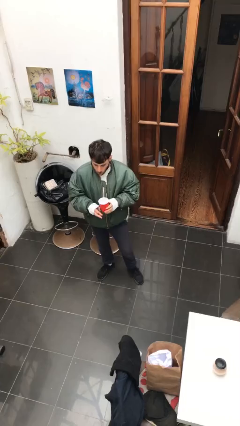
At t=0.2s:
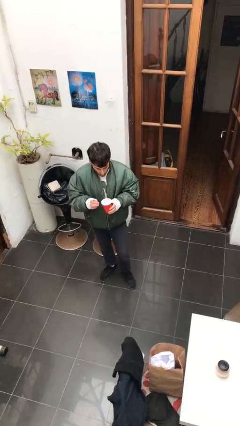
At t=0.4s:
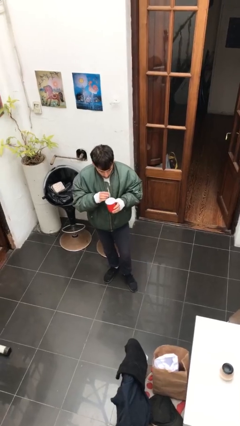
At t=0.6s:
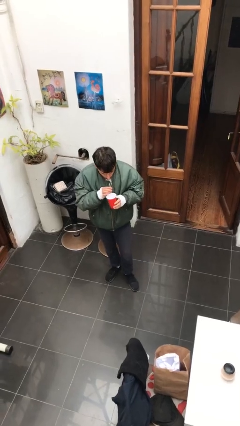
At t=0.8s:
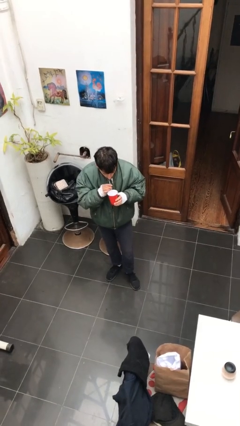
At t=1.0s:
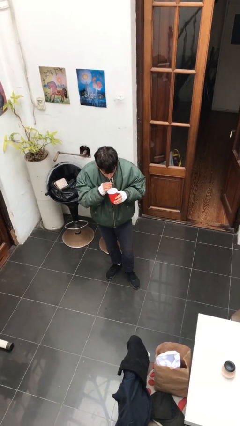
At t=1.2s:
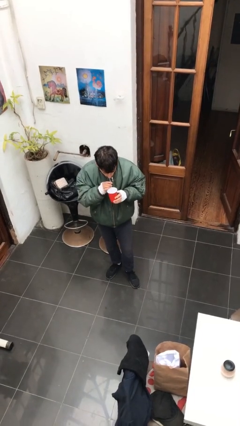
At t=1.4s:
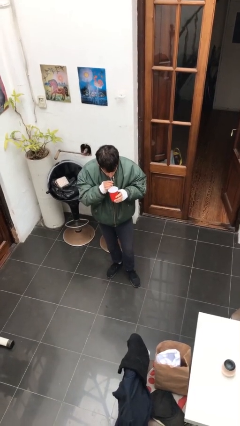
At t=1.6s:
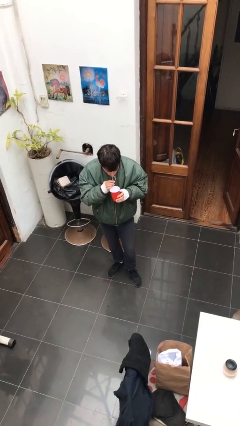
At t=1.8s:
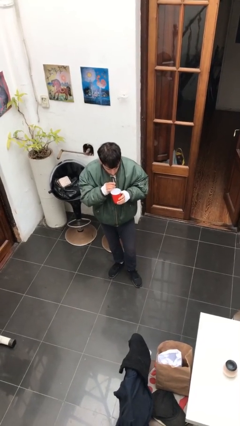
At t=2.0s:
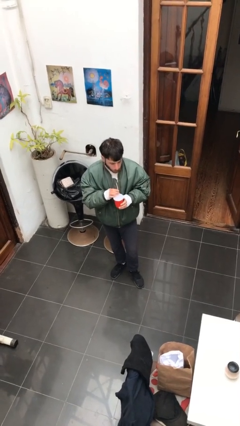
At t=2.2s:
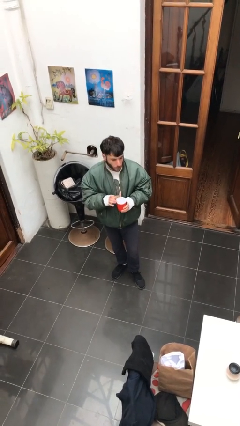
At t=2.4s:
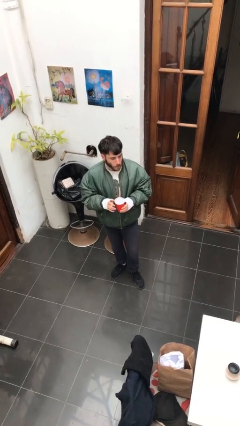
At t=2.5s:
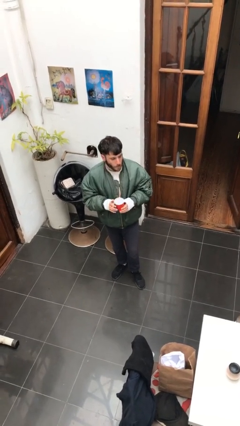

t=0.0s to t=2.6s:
person drinks from straw

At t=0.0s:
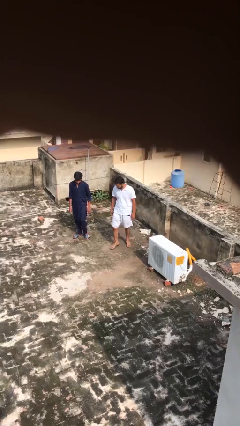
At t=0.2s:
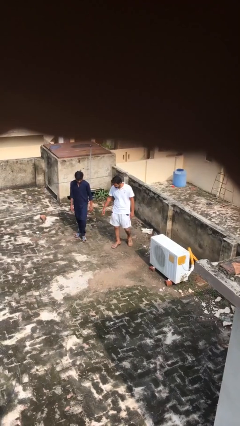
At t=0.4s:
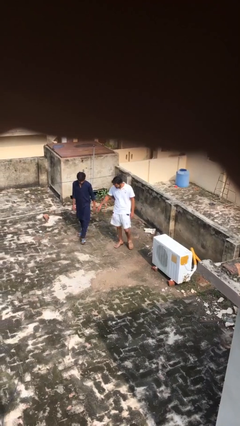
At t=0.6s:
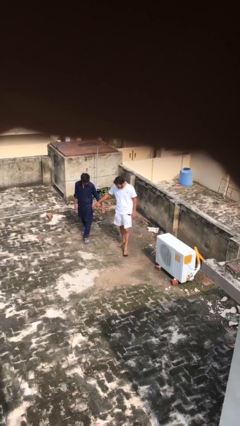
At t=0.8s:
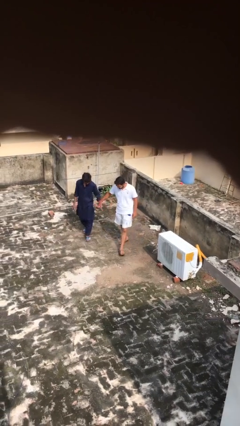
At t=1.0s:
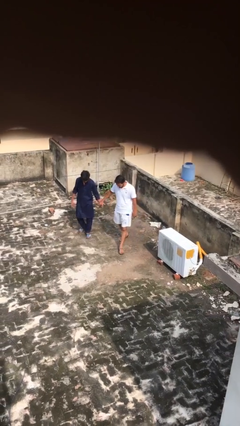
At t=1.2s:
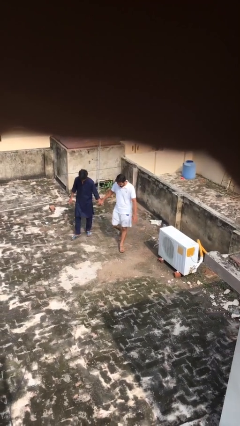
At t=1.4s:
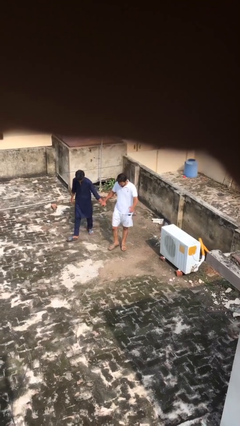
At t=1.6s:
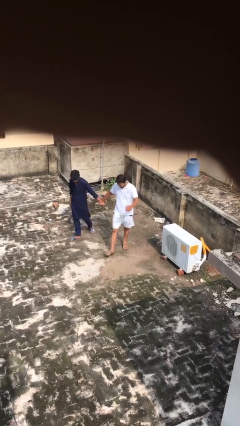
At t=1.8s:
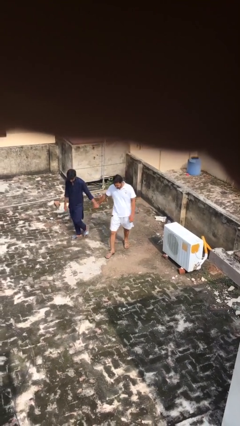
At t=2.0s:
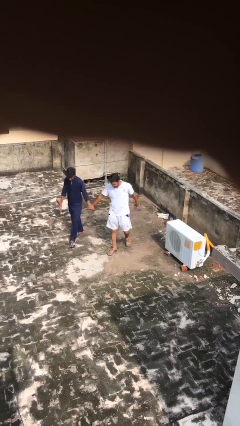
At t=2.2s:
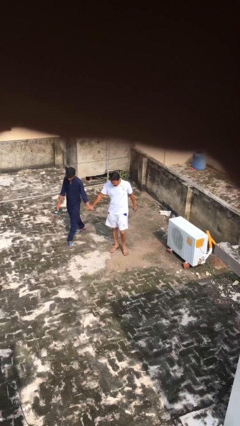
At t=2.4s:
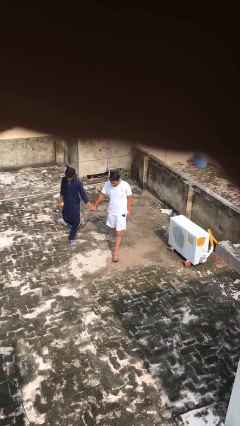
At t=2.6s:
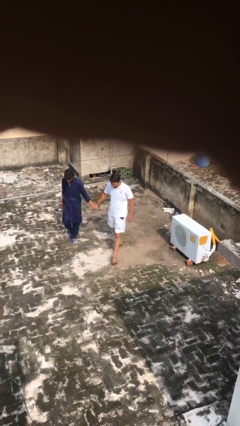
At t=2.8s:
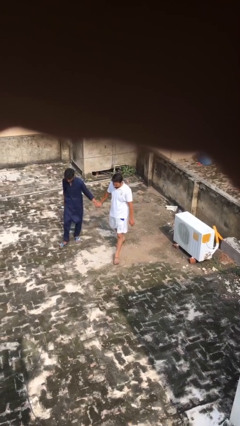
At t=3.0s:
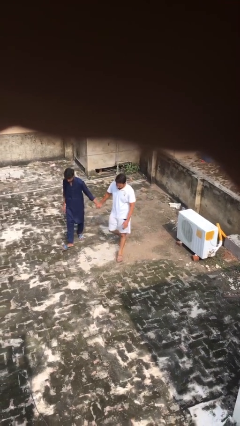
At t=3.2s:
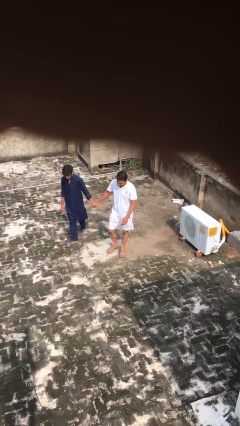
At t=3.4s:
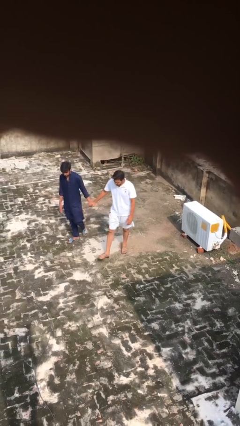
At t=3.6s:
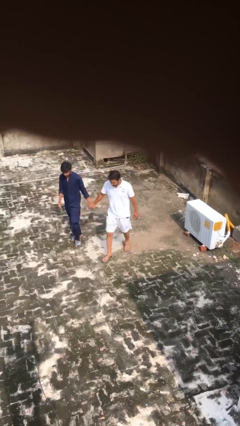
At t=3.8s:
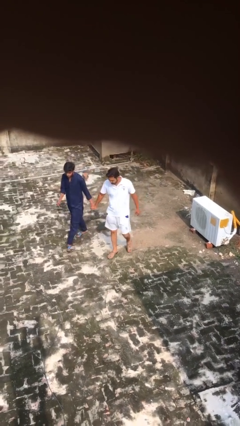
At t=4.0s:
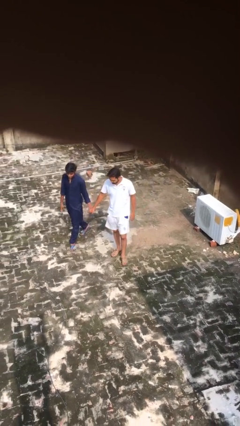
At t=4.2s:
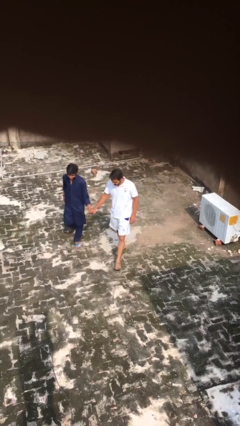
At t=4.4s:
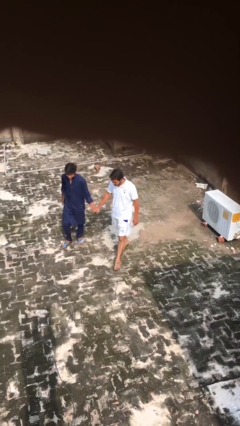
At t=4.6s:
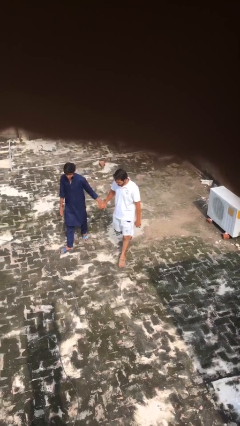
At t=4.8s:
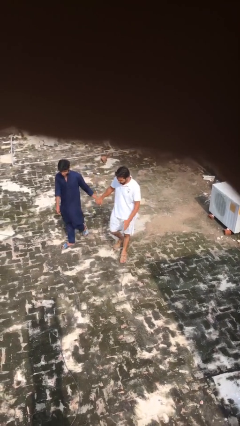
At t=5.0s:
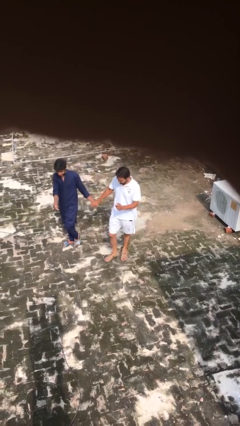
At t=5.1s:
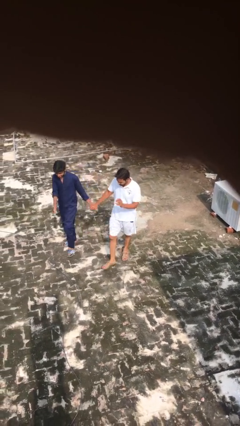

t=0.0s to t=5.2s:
person holds hand

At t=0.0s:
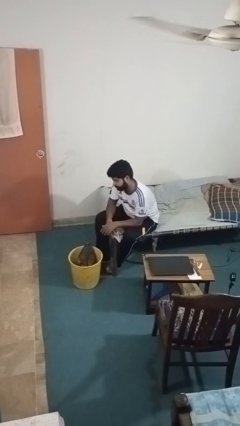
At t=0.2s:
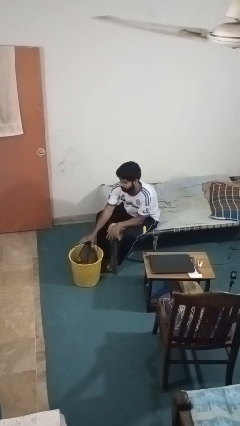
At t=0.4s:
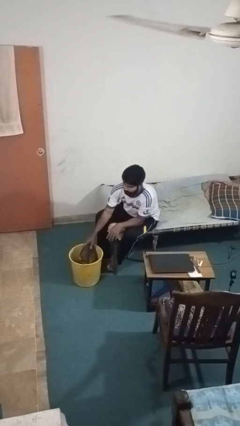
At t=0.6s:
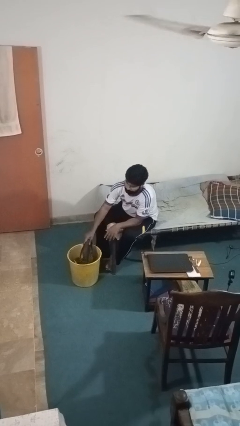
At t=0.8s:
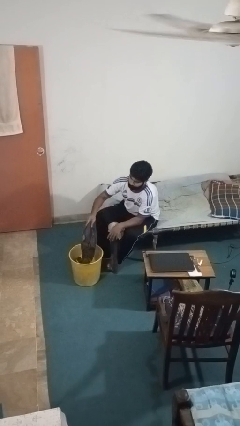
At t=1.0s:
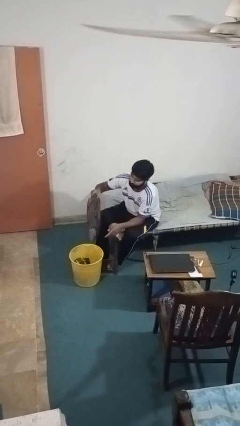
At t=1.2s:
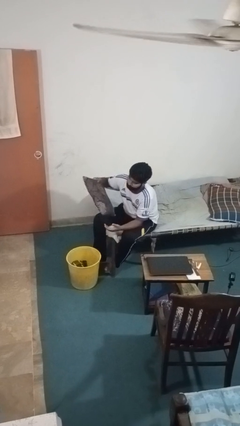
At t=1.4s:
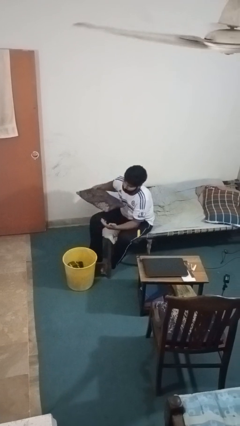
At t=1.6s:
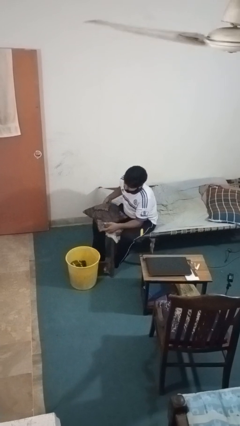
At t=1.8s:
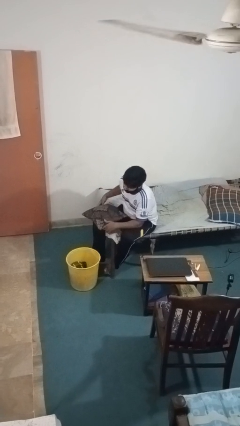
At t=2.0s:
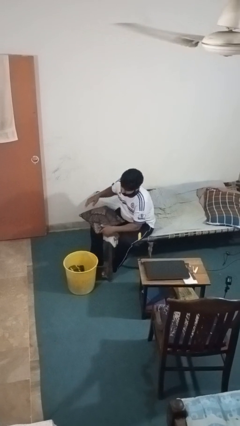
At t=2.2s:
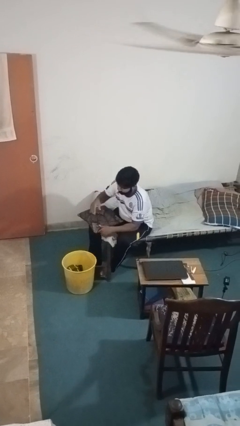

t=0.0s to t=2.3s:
person takes object from basket

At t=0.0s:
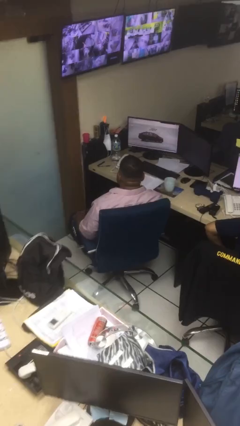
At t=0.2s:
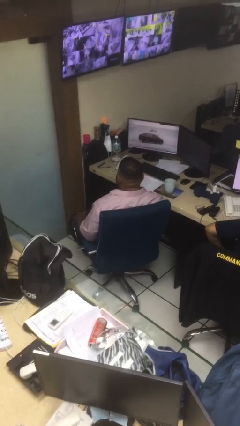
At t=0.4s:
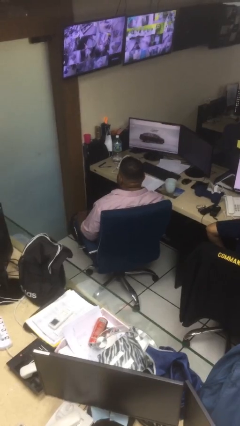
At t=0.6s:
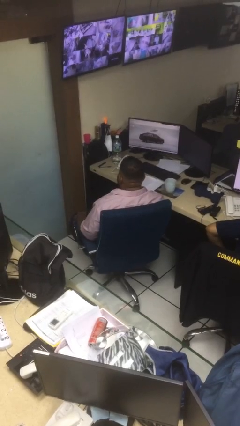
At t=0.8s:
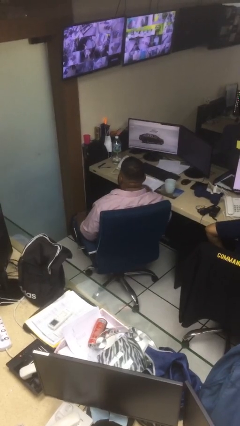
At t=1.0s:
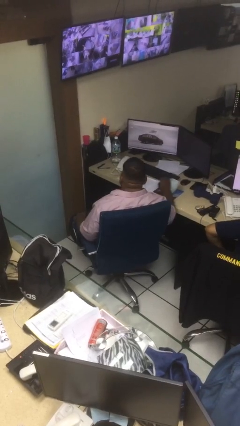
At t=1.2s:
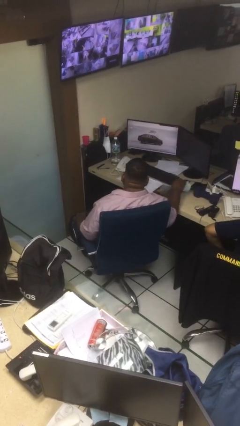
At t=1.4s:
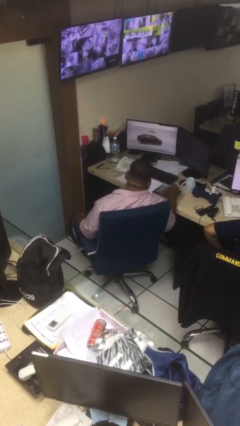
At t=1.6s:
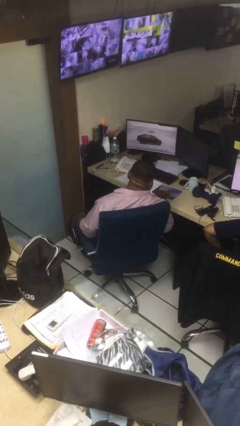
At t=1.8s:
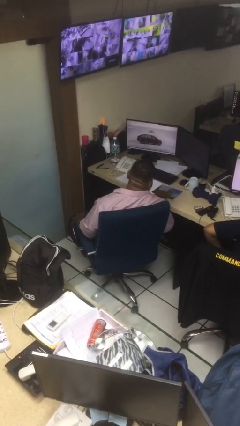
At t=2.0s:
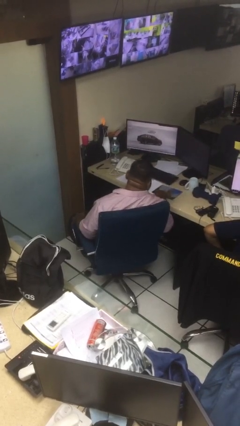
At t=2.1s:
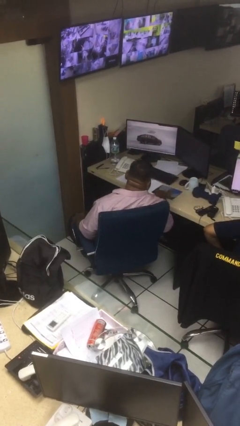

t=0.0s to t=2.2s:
person knocks over glass

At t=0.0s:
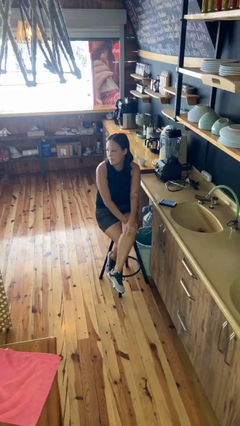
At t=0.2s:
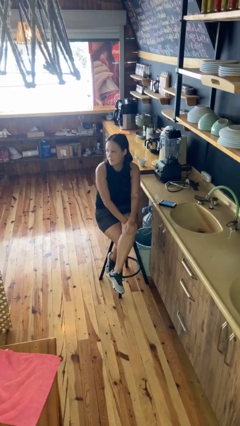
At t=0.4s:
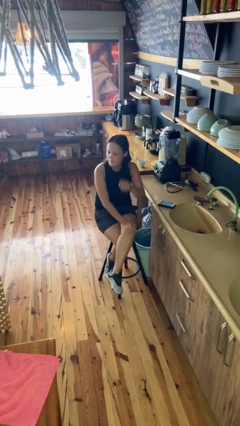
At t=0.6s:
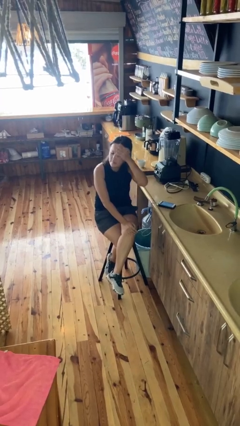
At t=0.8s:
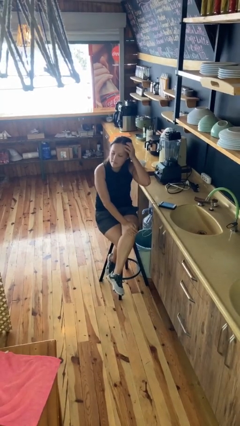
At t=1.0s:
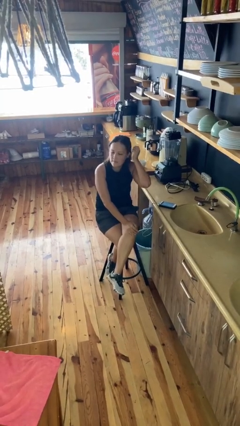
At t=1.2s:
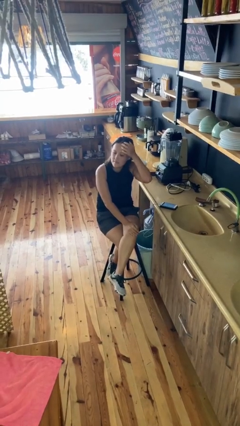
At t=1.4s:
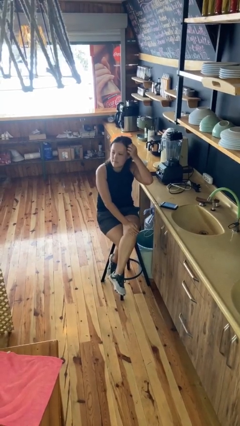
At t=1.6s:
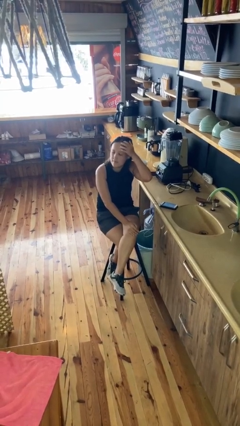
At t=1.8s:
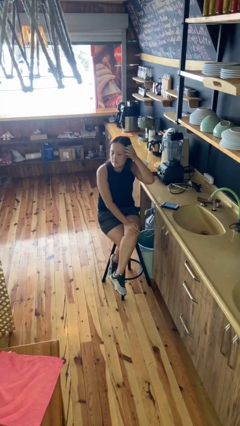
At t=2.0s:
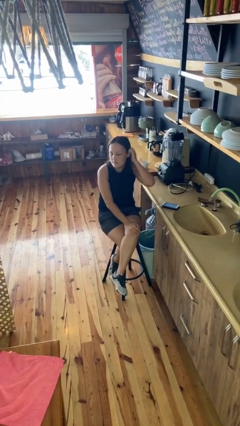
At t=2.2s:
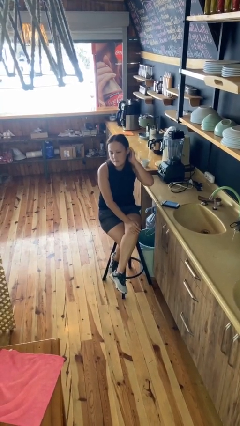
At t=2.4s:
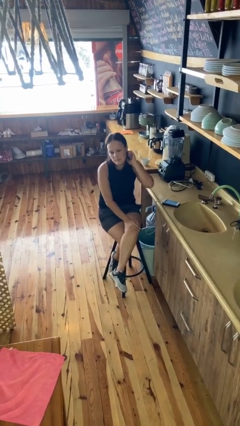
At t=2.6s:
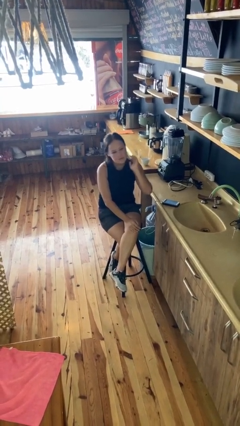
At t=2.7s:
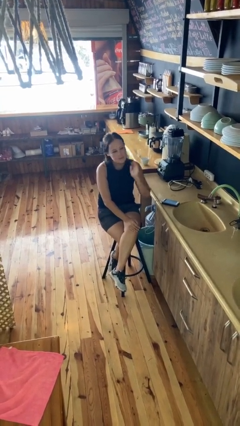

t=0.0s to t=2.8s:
person strokes hair

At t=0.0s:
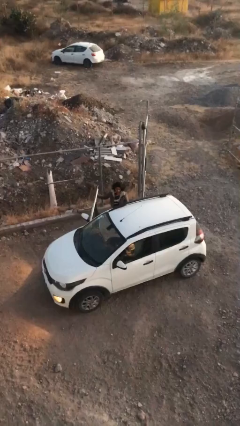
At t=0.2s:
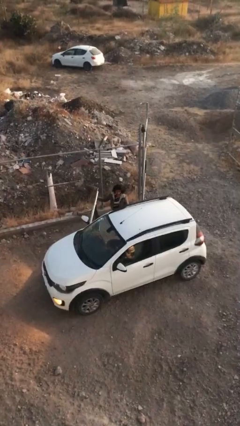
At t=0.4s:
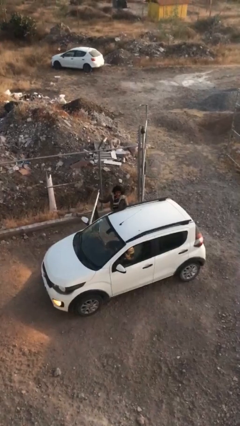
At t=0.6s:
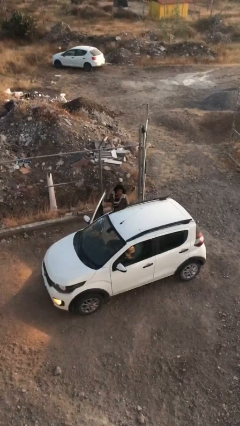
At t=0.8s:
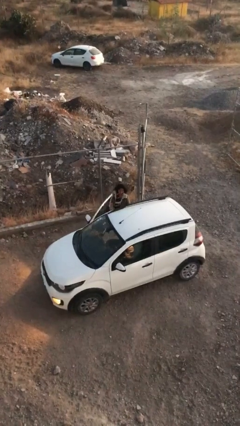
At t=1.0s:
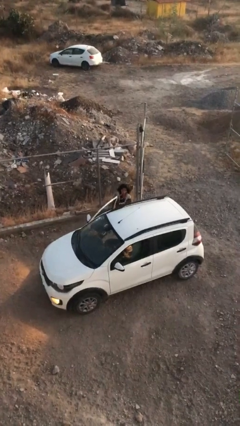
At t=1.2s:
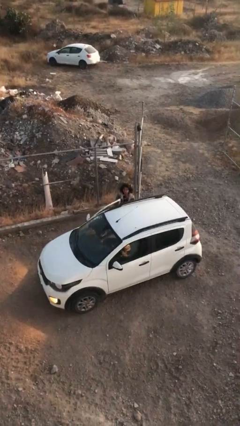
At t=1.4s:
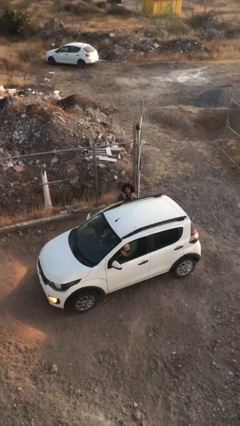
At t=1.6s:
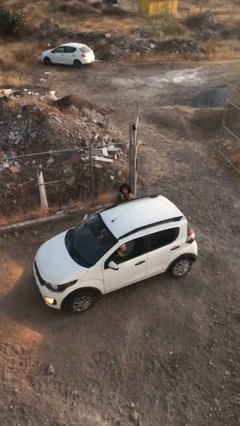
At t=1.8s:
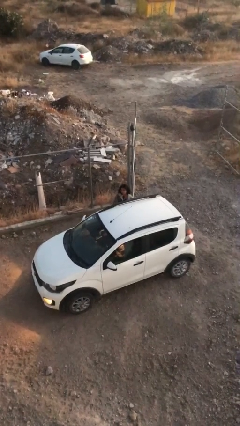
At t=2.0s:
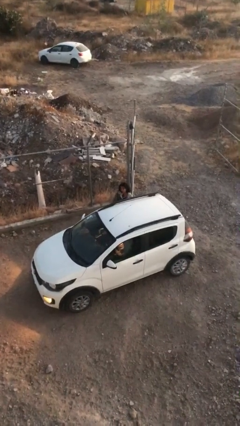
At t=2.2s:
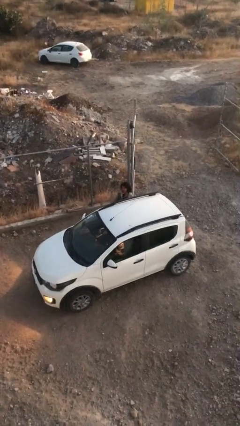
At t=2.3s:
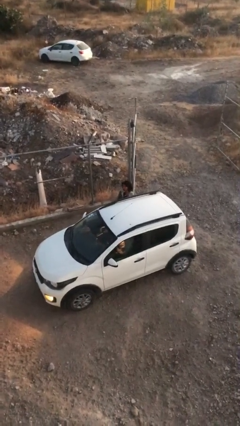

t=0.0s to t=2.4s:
person closes car door

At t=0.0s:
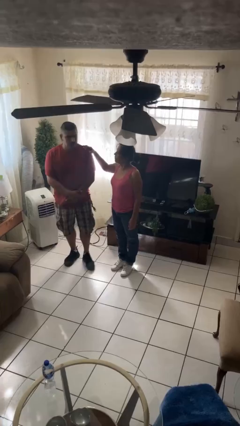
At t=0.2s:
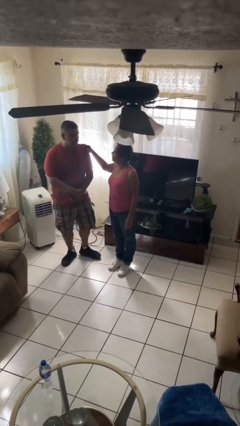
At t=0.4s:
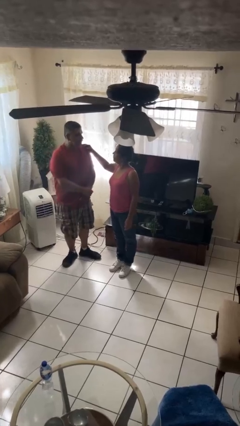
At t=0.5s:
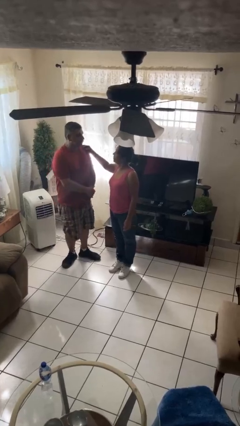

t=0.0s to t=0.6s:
person grabs person by shoulder
